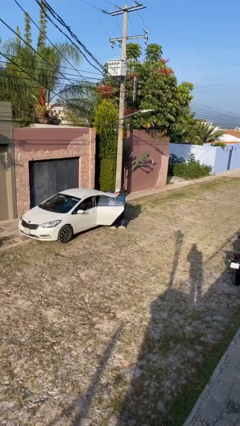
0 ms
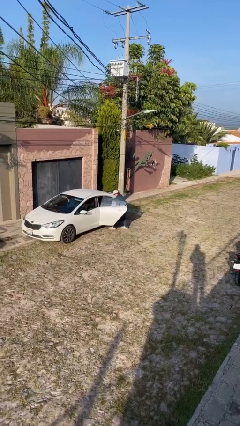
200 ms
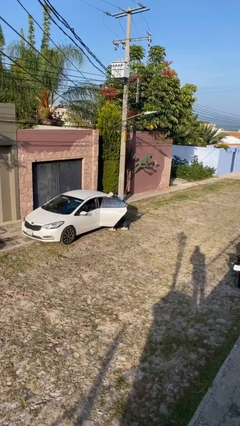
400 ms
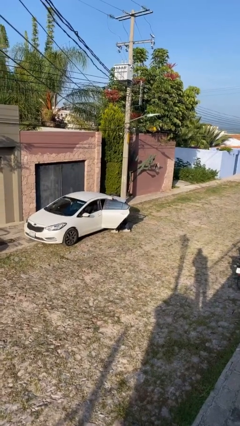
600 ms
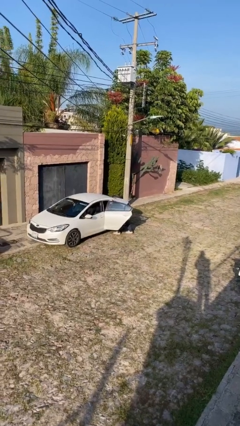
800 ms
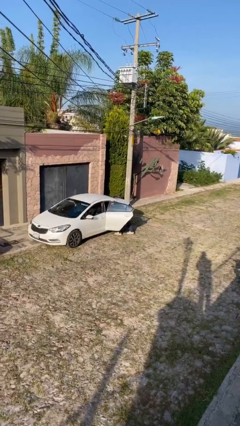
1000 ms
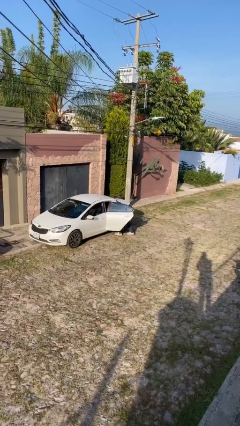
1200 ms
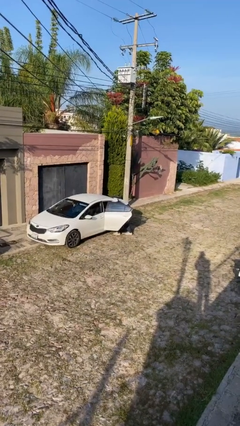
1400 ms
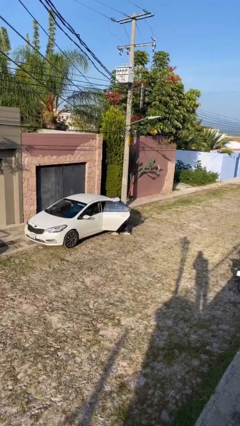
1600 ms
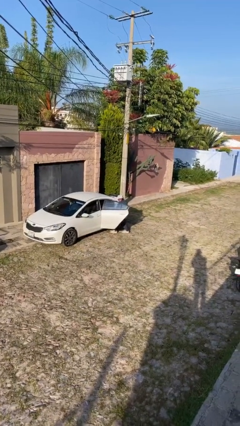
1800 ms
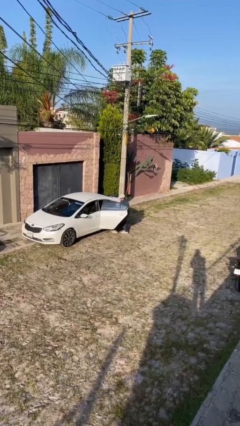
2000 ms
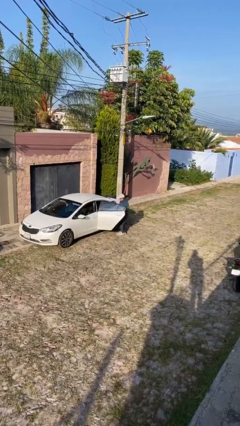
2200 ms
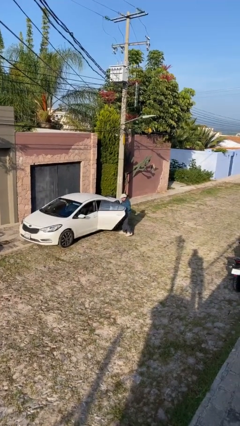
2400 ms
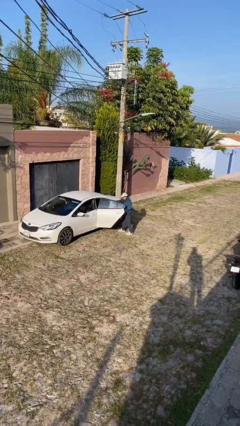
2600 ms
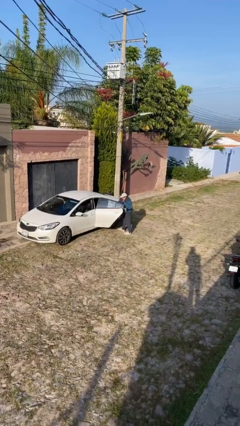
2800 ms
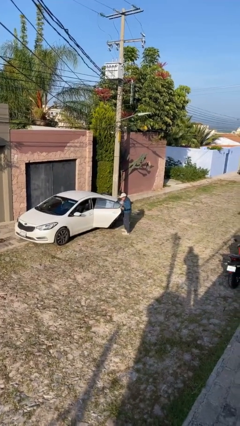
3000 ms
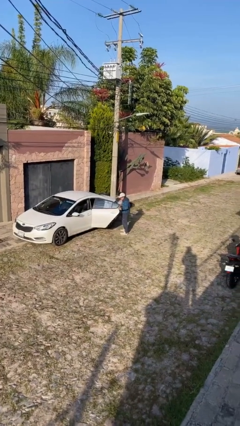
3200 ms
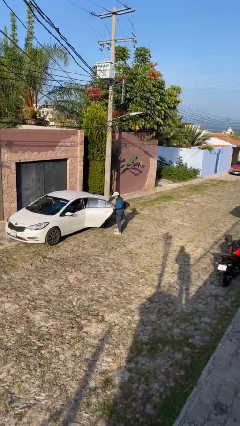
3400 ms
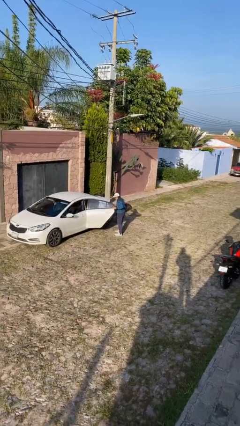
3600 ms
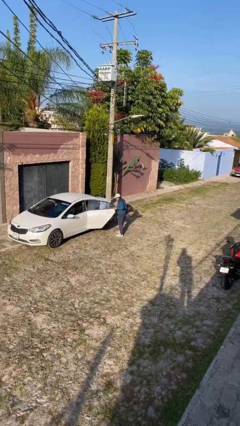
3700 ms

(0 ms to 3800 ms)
person unloads car

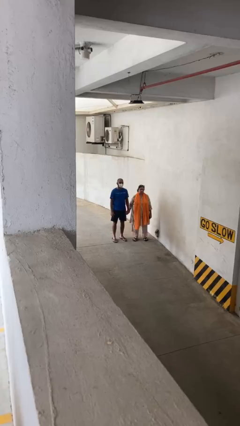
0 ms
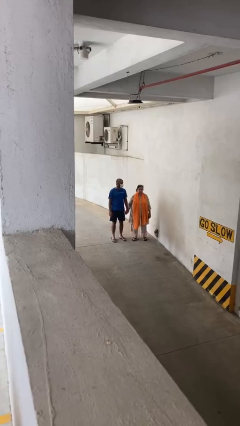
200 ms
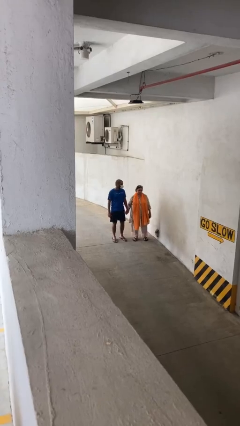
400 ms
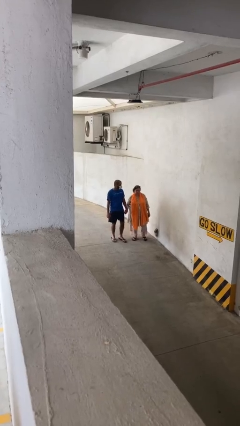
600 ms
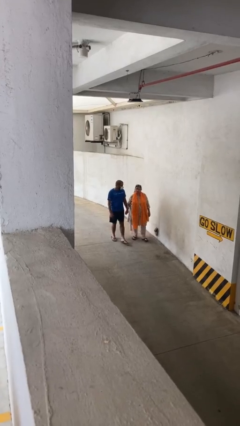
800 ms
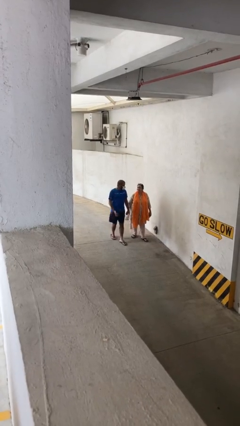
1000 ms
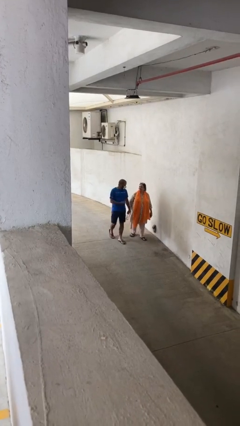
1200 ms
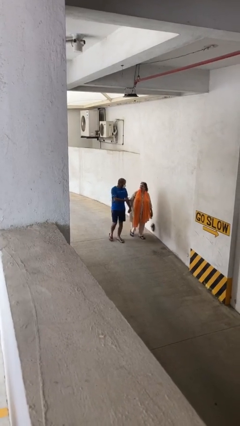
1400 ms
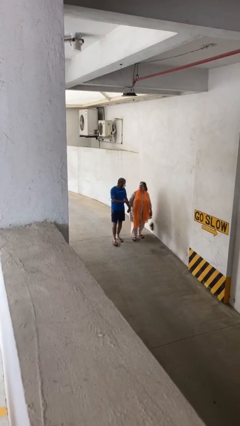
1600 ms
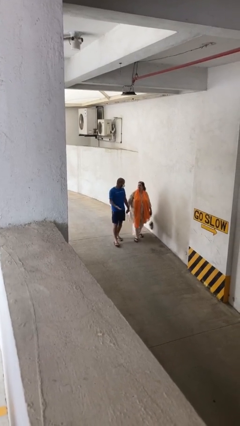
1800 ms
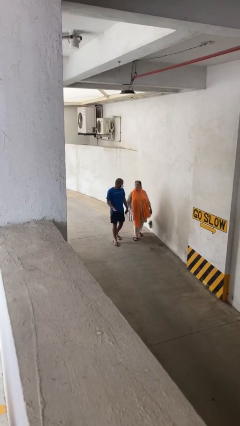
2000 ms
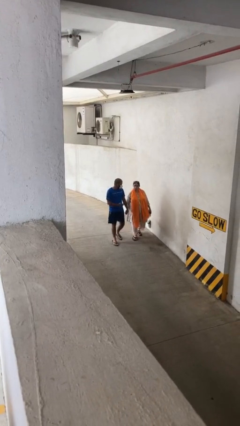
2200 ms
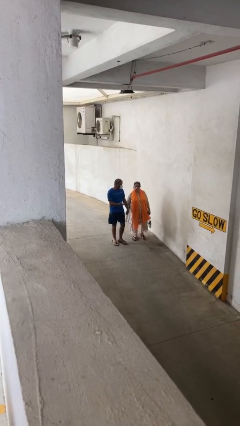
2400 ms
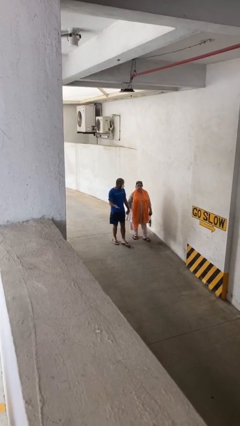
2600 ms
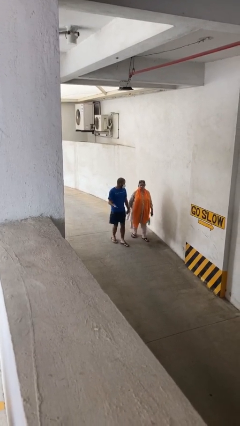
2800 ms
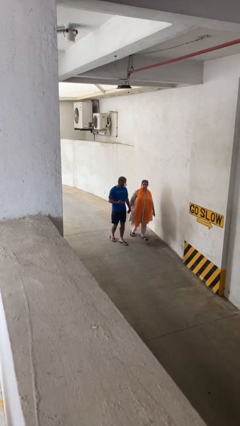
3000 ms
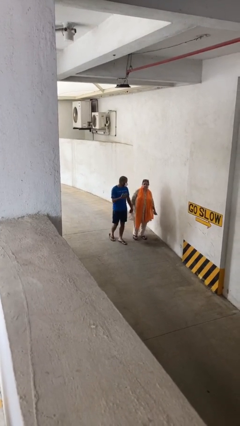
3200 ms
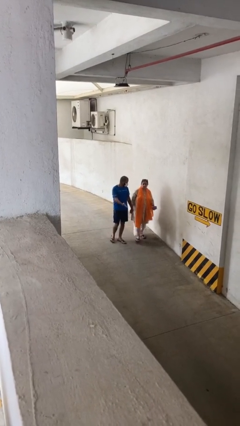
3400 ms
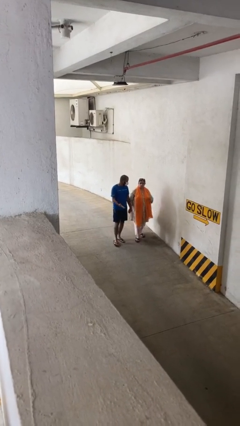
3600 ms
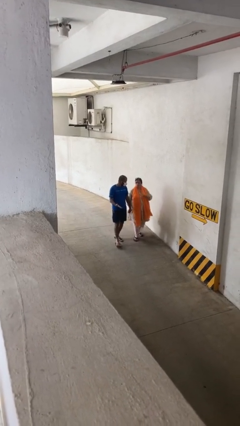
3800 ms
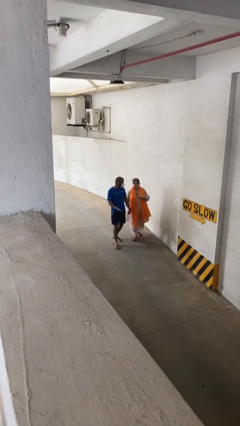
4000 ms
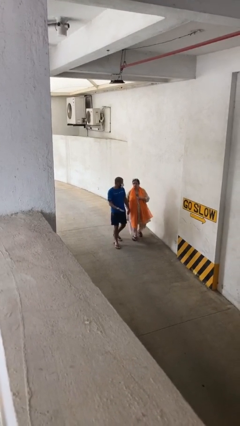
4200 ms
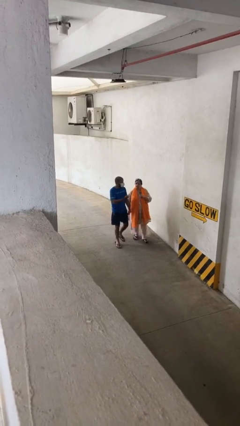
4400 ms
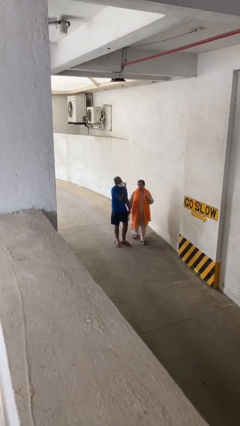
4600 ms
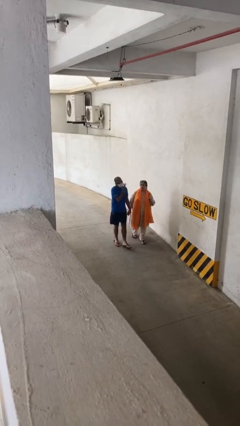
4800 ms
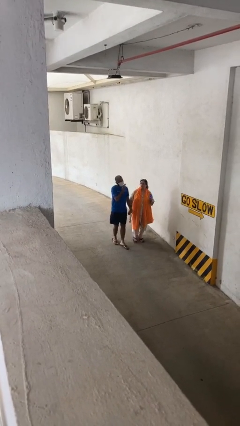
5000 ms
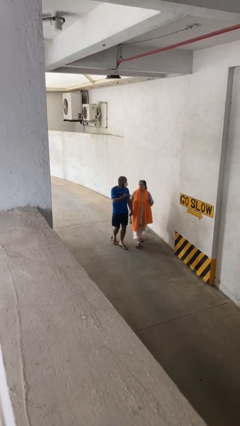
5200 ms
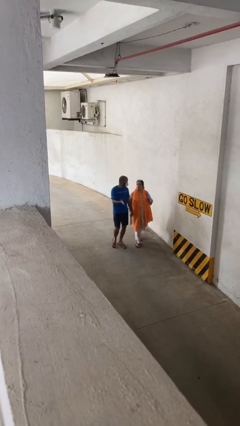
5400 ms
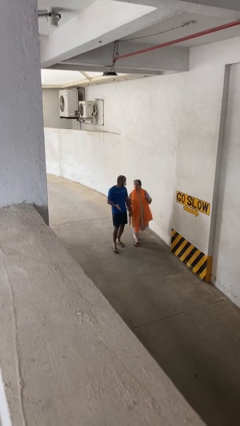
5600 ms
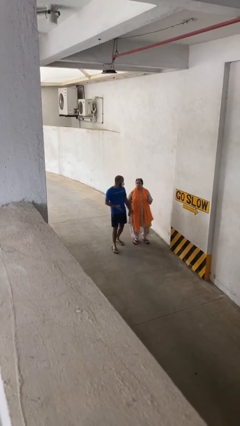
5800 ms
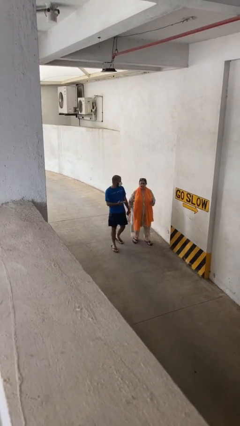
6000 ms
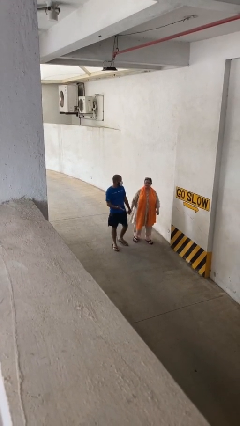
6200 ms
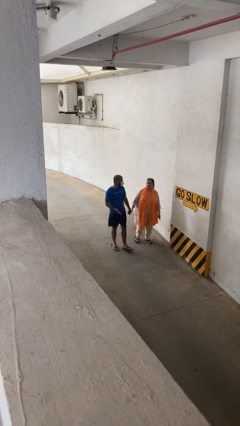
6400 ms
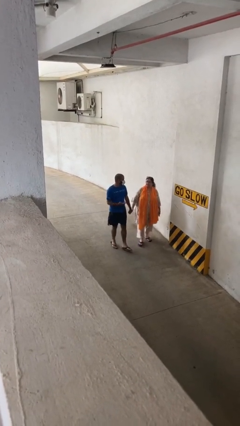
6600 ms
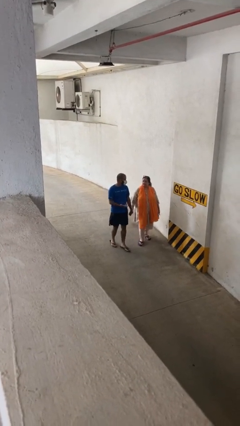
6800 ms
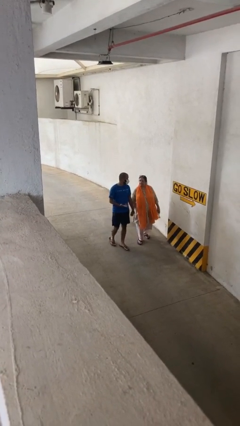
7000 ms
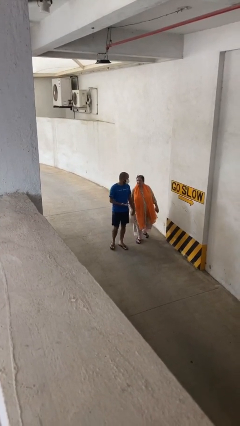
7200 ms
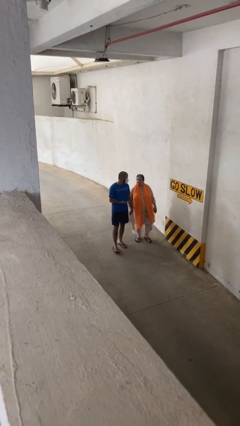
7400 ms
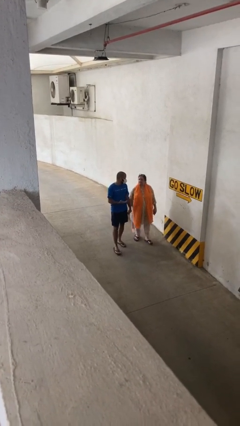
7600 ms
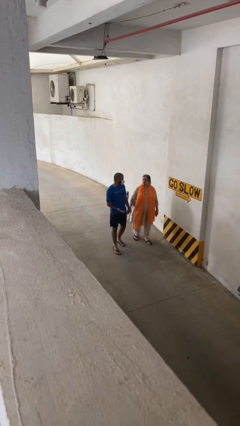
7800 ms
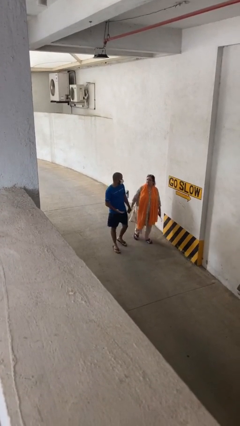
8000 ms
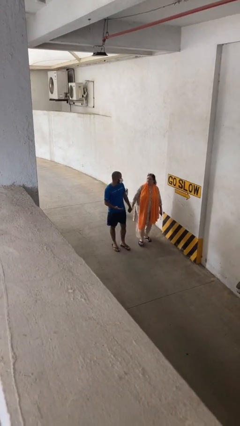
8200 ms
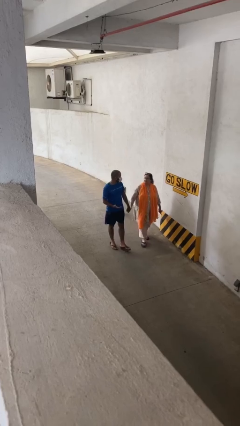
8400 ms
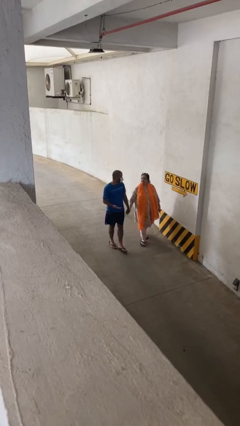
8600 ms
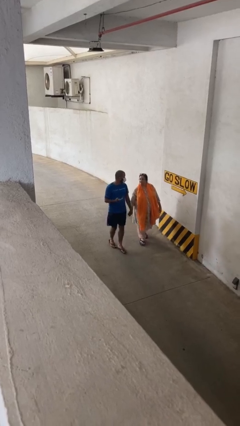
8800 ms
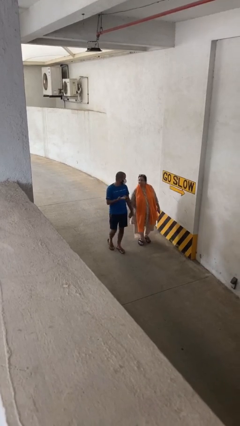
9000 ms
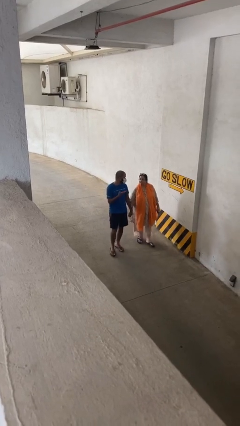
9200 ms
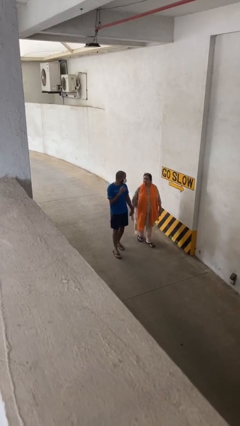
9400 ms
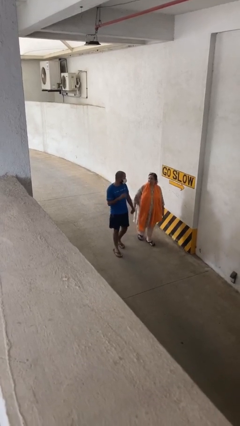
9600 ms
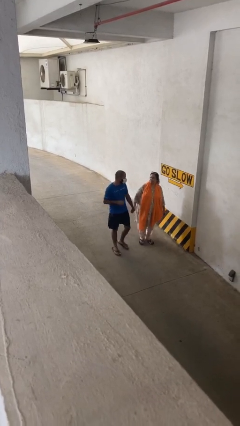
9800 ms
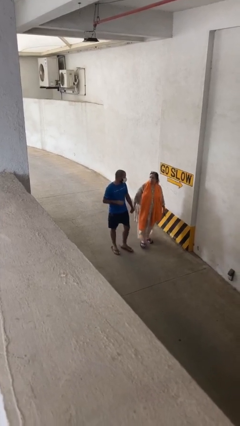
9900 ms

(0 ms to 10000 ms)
person holds hand

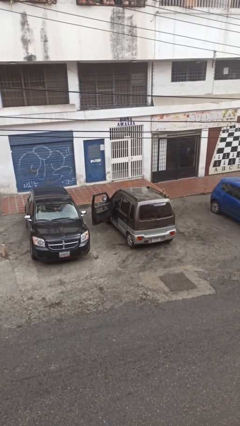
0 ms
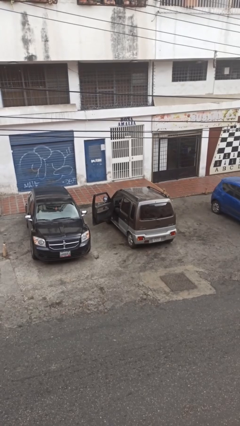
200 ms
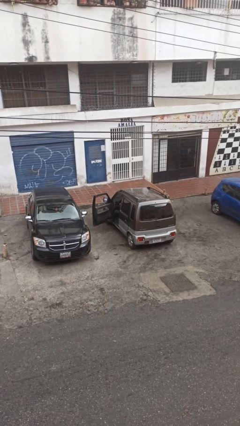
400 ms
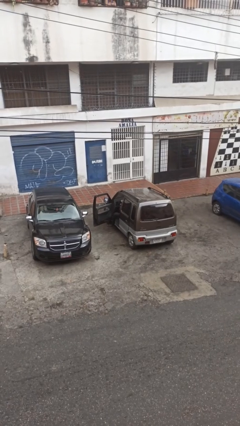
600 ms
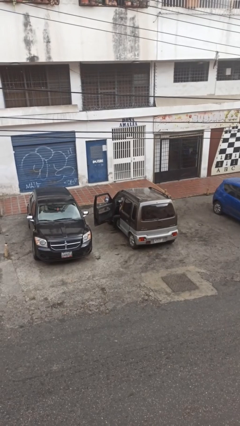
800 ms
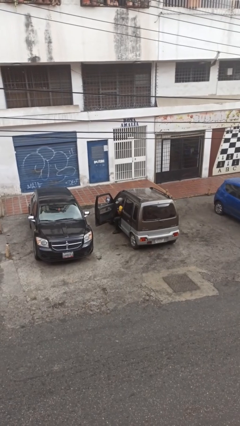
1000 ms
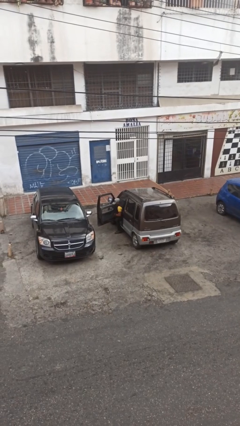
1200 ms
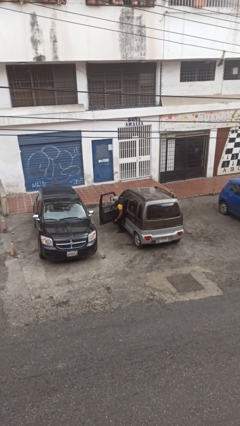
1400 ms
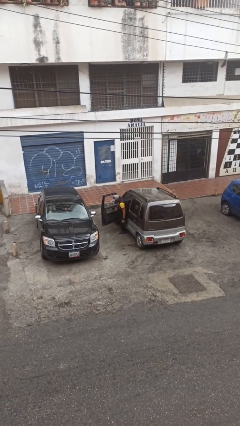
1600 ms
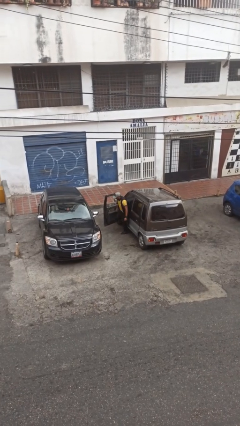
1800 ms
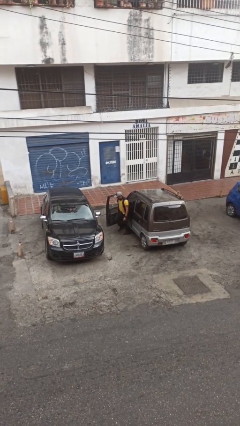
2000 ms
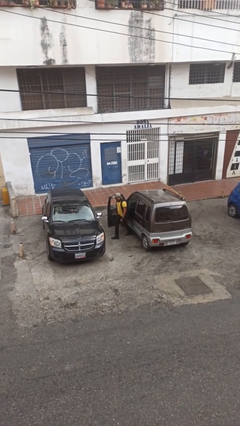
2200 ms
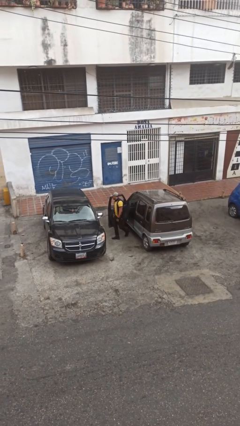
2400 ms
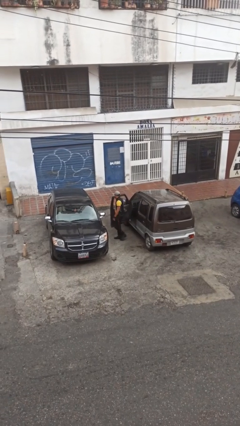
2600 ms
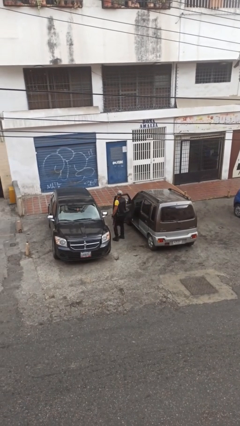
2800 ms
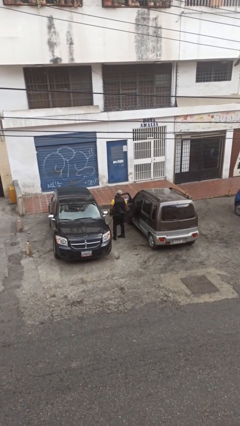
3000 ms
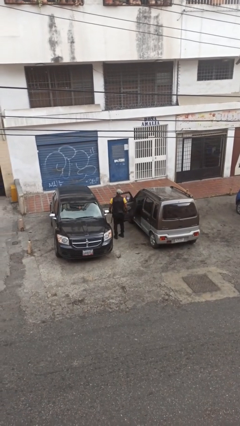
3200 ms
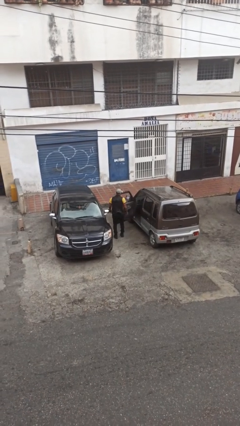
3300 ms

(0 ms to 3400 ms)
person exits car

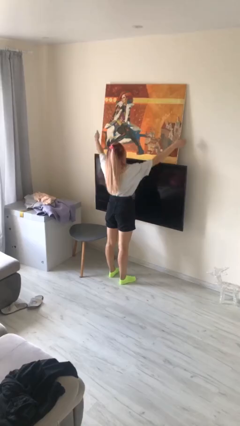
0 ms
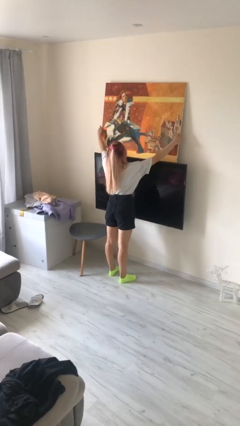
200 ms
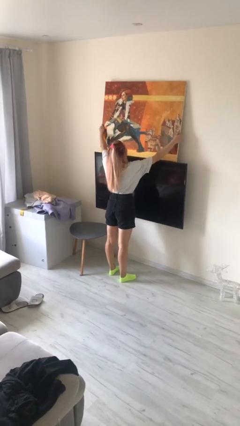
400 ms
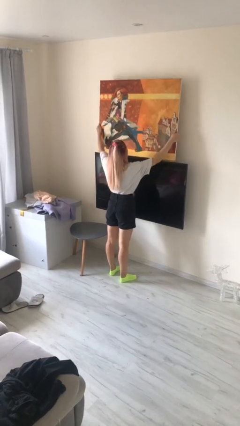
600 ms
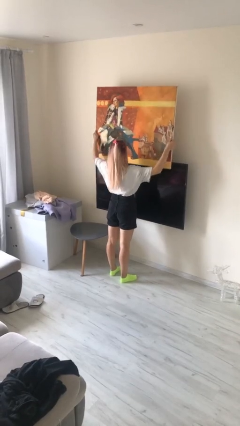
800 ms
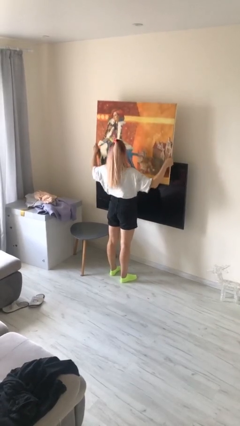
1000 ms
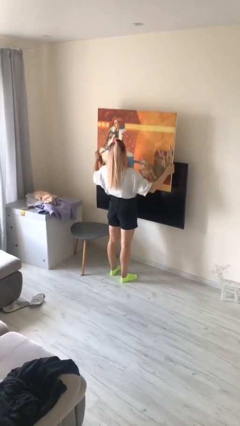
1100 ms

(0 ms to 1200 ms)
person takes down picture frame
